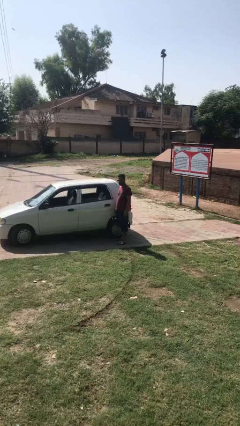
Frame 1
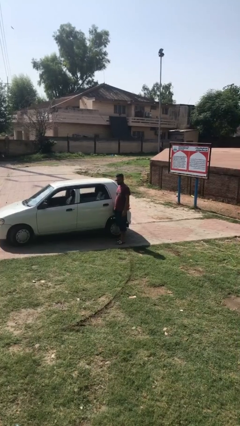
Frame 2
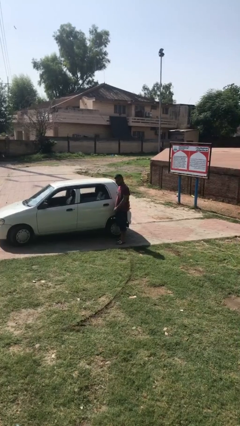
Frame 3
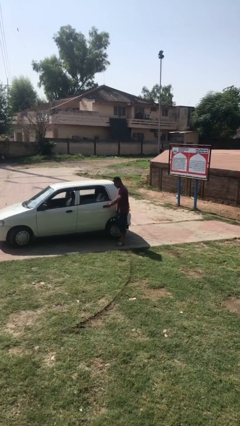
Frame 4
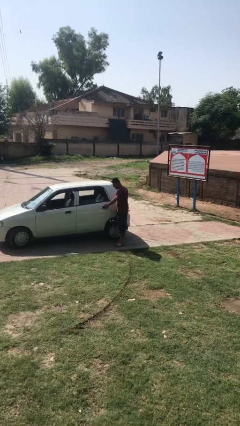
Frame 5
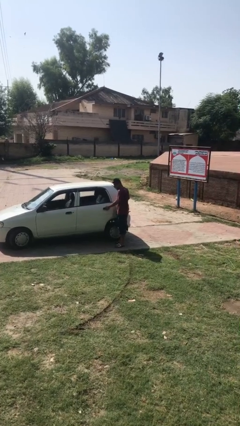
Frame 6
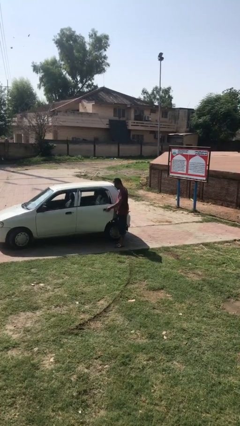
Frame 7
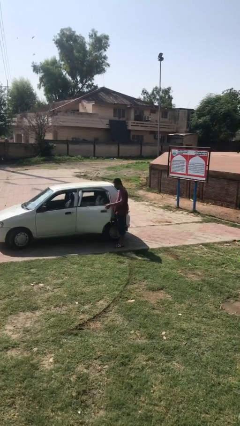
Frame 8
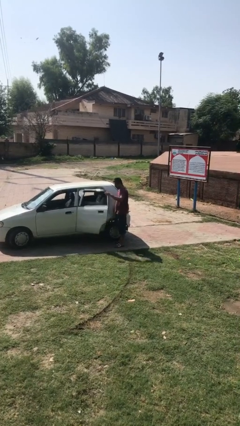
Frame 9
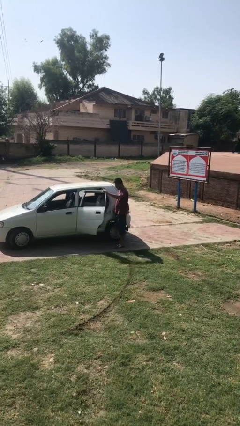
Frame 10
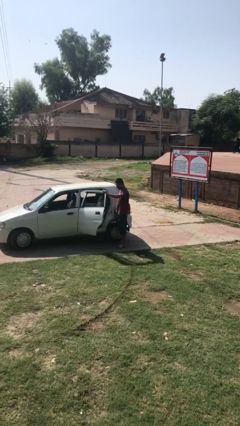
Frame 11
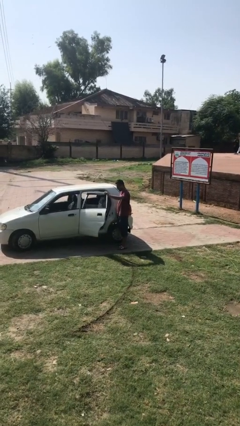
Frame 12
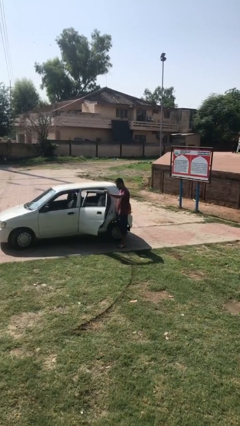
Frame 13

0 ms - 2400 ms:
person opens car door

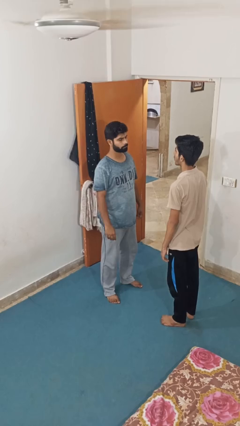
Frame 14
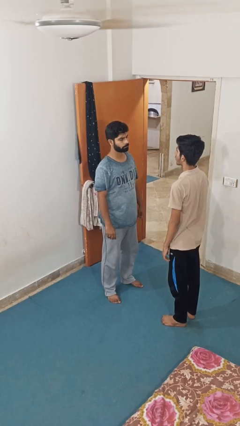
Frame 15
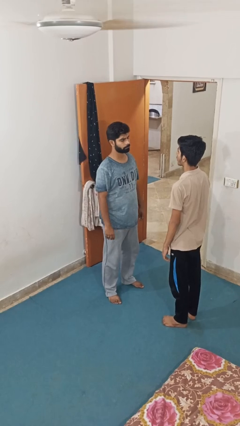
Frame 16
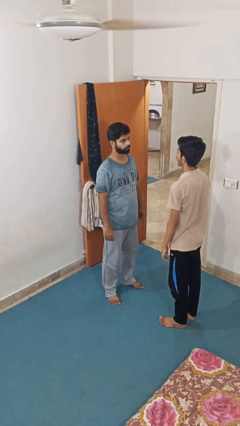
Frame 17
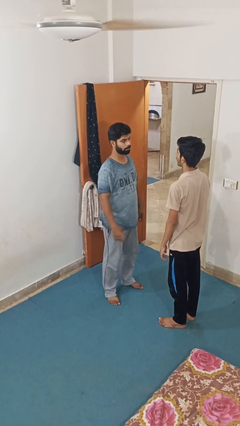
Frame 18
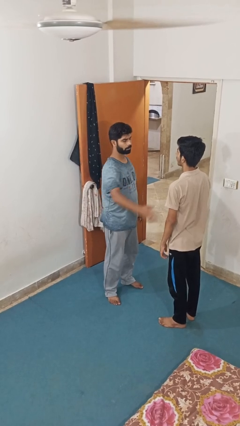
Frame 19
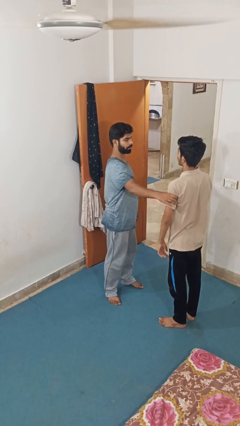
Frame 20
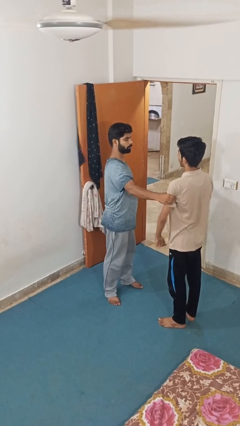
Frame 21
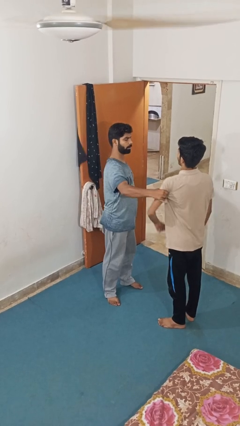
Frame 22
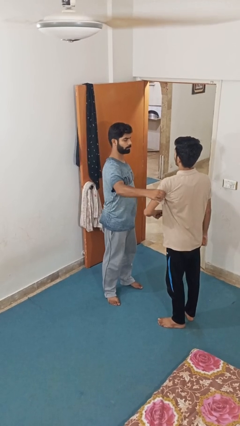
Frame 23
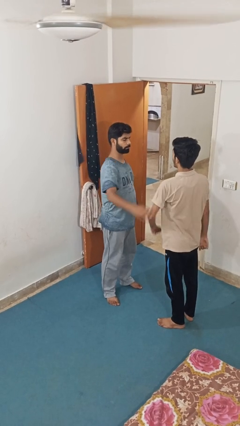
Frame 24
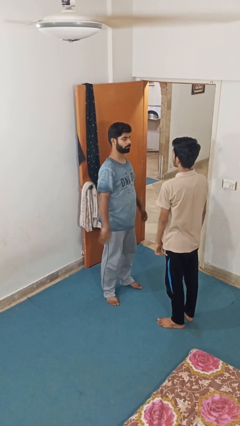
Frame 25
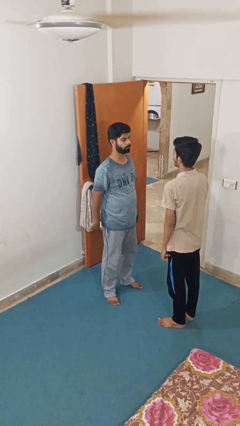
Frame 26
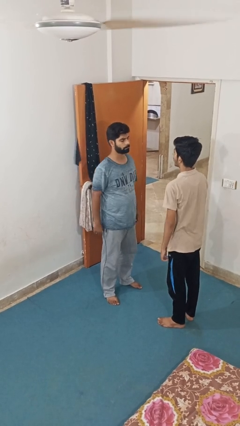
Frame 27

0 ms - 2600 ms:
person grabs person by bicep

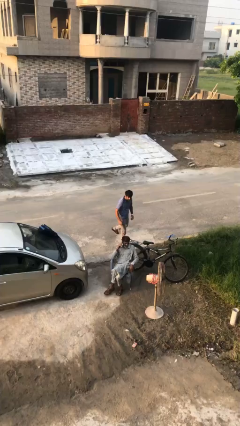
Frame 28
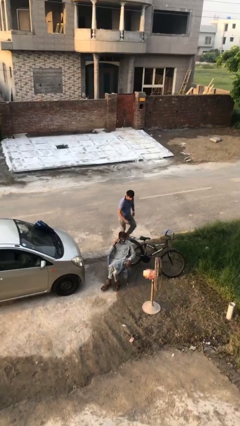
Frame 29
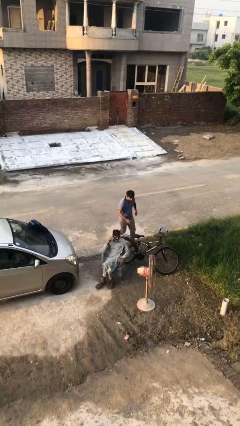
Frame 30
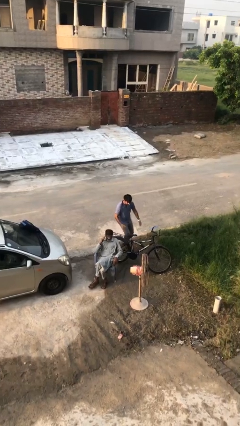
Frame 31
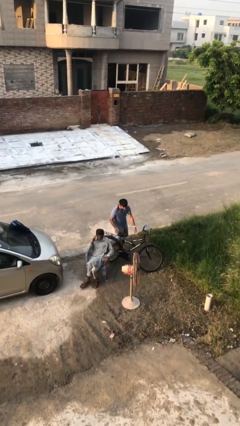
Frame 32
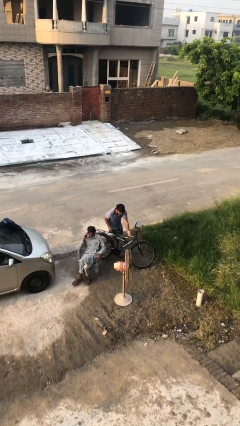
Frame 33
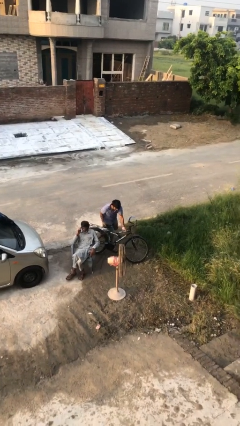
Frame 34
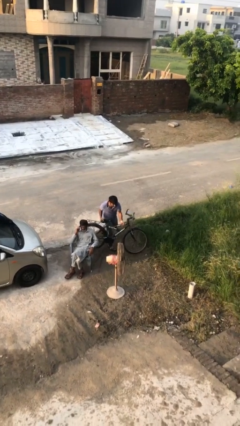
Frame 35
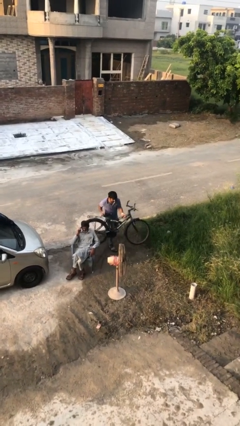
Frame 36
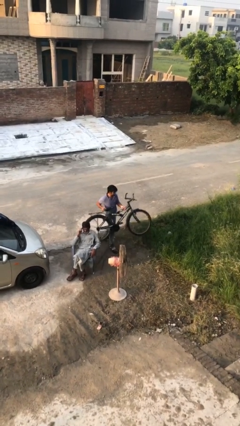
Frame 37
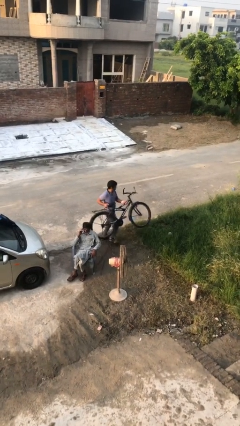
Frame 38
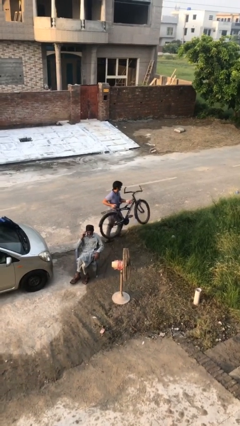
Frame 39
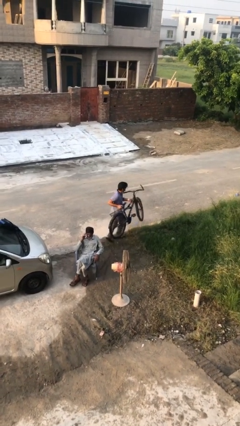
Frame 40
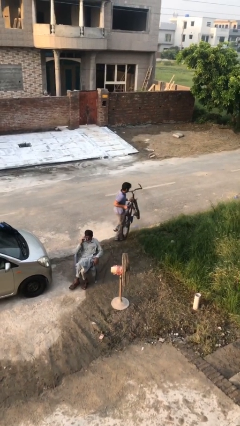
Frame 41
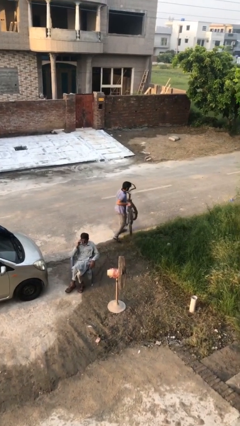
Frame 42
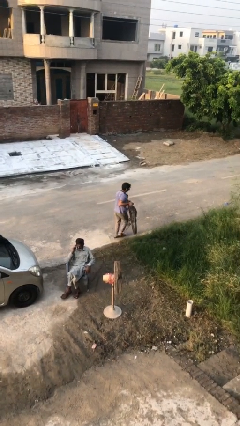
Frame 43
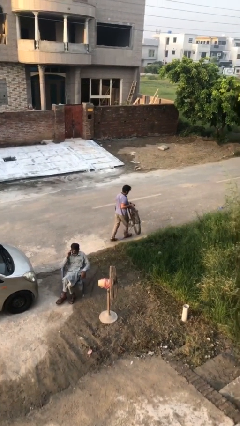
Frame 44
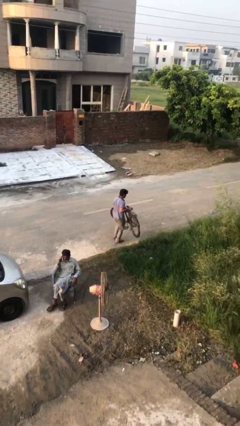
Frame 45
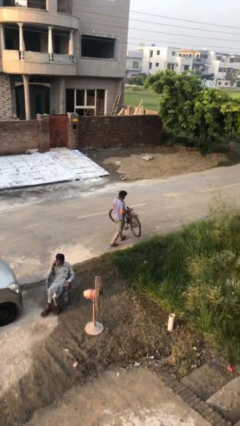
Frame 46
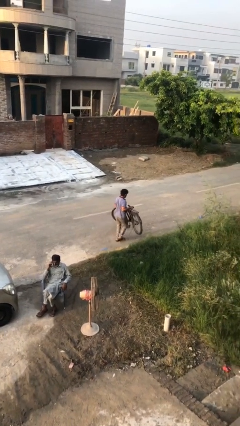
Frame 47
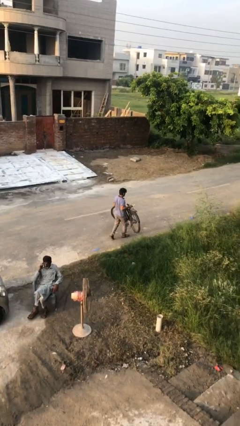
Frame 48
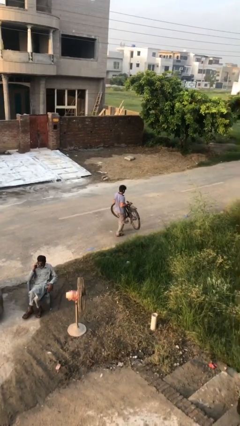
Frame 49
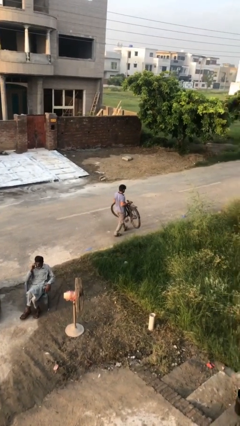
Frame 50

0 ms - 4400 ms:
person steals object from person

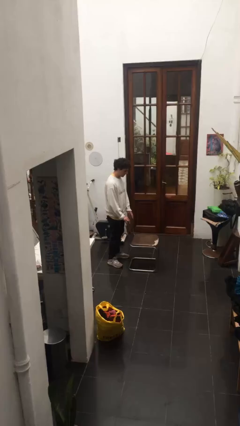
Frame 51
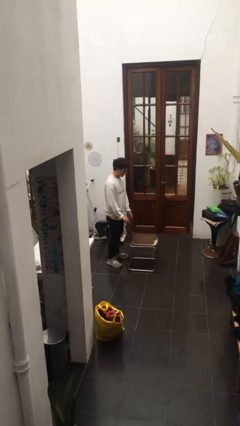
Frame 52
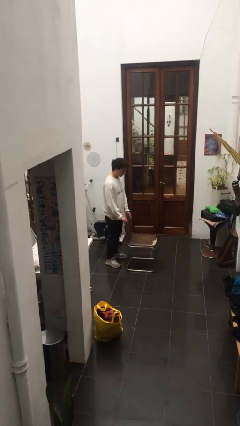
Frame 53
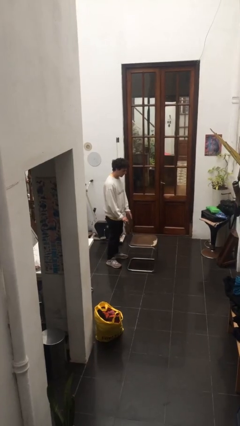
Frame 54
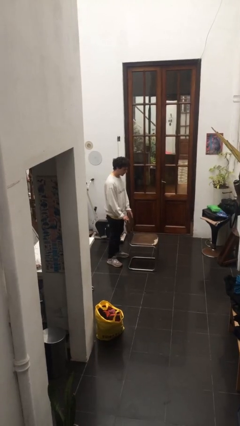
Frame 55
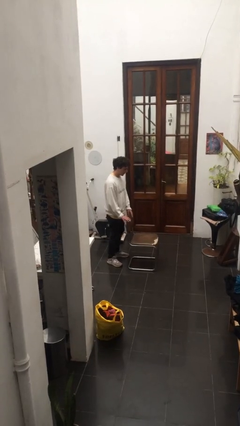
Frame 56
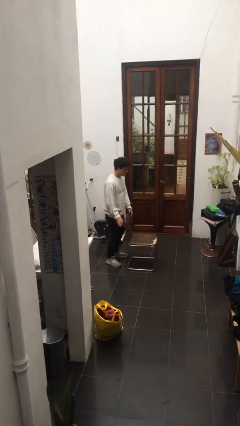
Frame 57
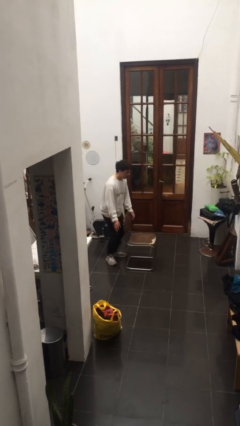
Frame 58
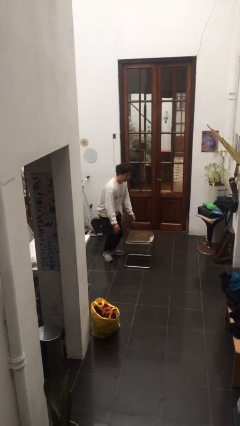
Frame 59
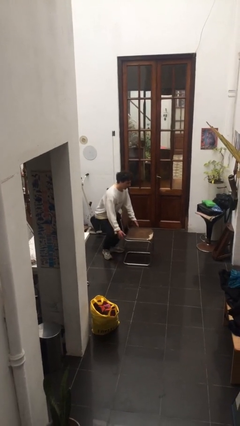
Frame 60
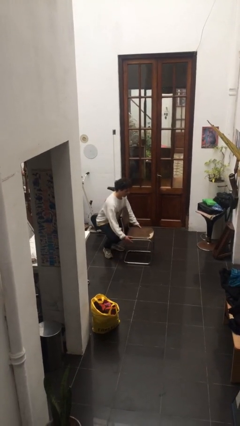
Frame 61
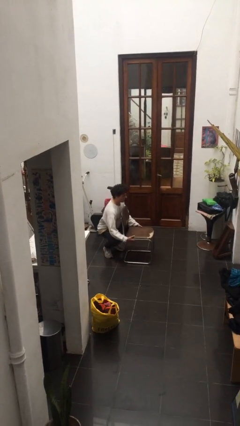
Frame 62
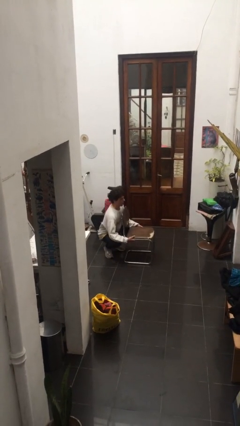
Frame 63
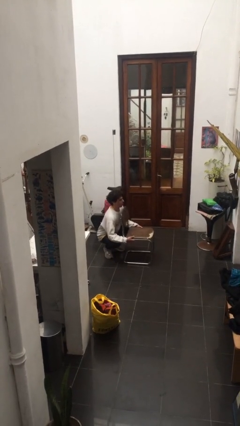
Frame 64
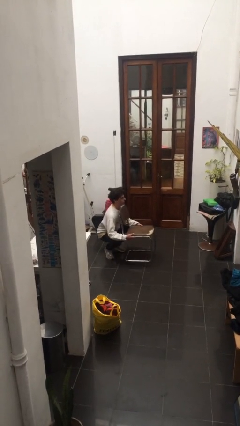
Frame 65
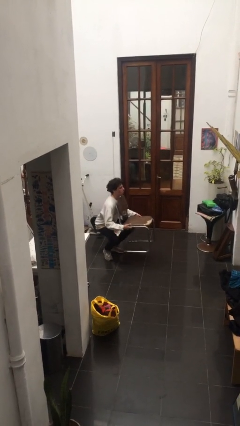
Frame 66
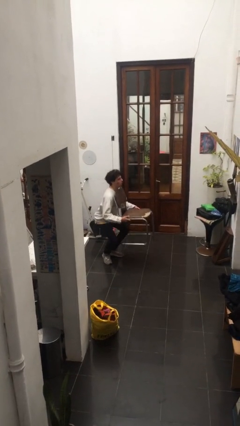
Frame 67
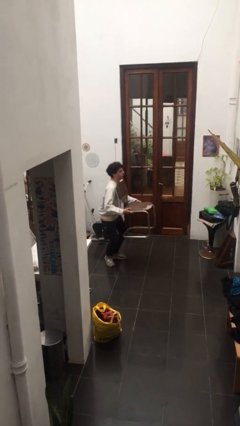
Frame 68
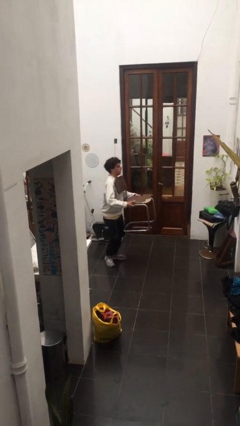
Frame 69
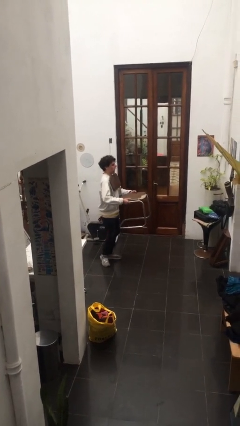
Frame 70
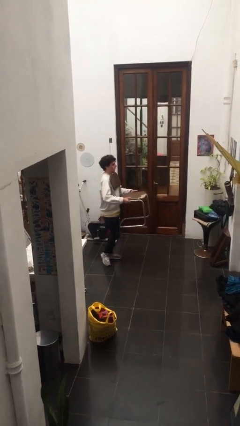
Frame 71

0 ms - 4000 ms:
person picks up object from floor

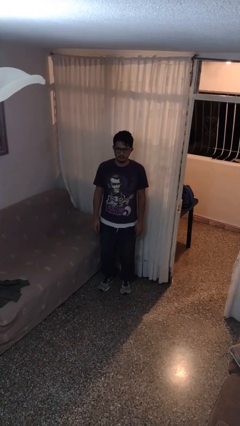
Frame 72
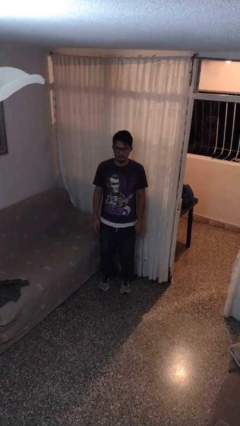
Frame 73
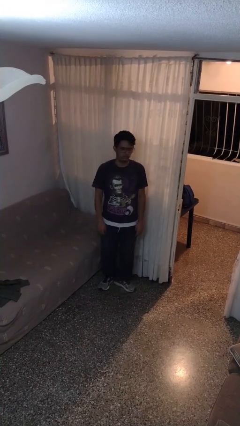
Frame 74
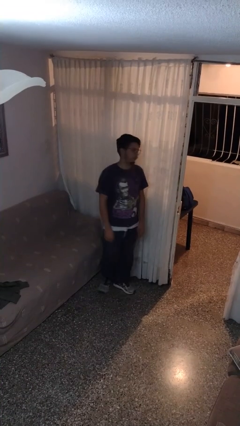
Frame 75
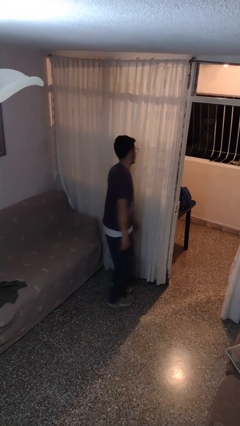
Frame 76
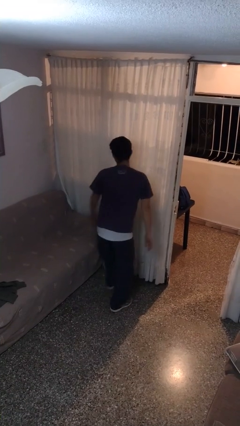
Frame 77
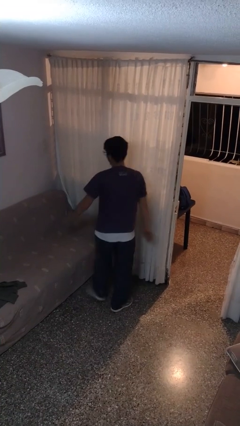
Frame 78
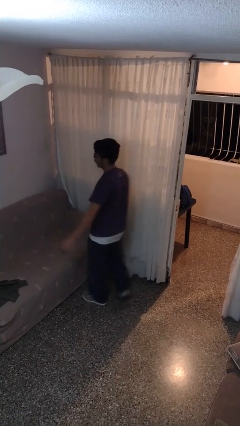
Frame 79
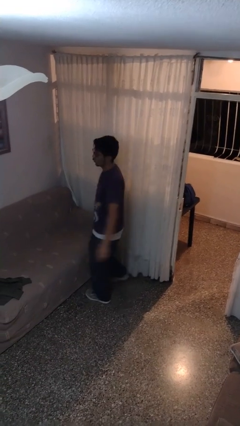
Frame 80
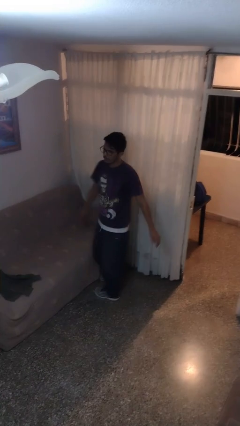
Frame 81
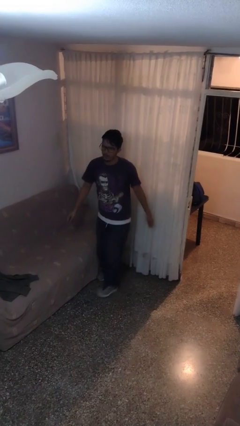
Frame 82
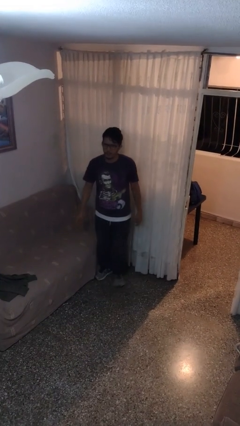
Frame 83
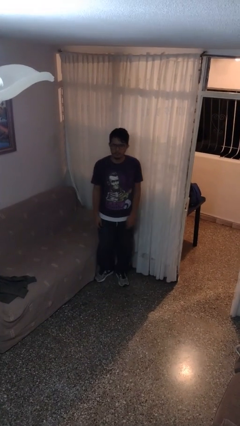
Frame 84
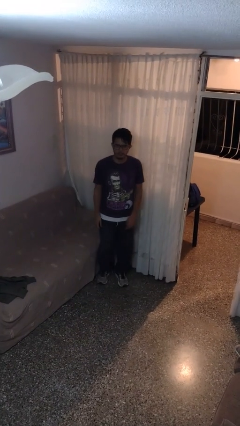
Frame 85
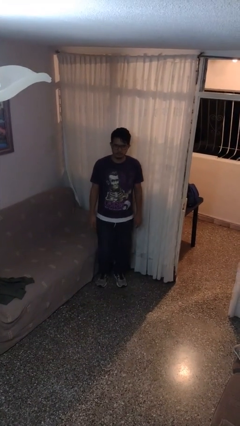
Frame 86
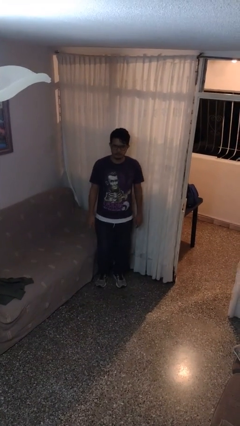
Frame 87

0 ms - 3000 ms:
person twirls

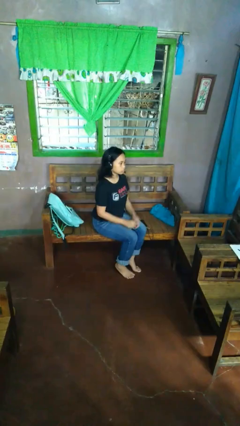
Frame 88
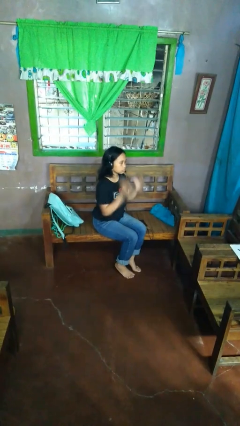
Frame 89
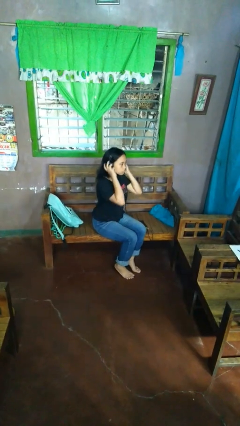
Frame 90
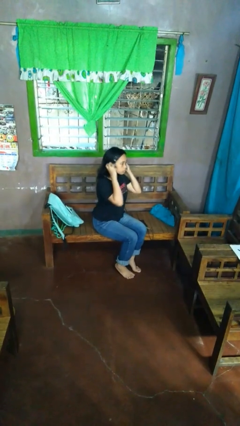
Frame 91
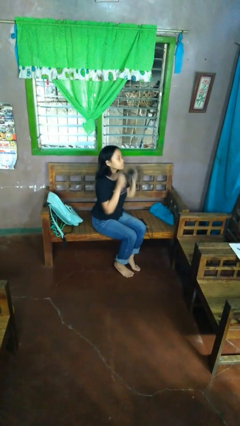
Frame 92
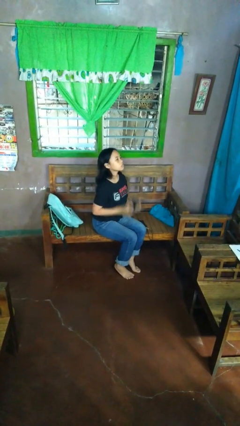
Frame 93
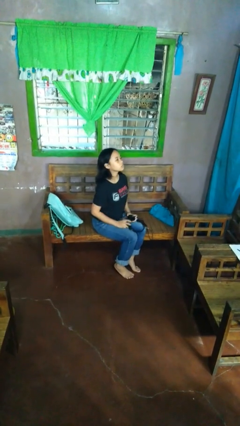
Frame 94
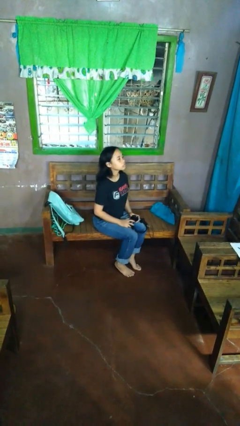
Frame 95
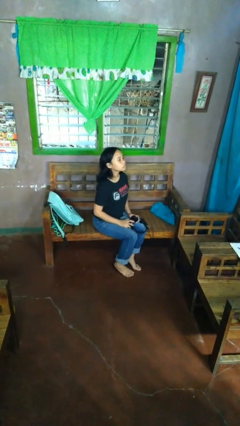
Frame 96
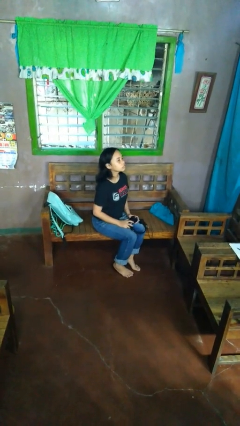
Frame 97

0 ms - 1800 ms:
person takes off headphones
